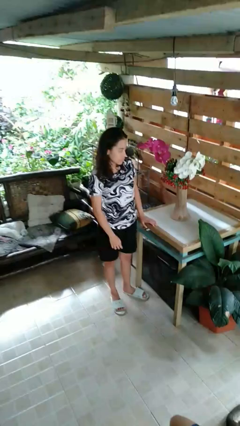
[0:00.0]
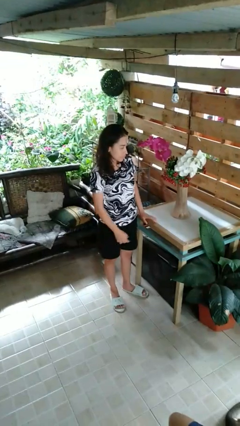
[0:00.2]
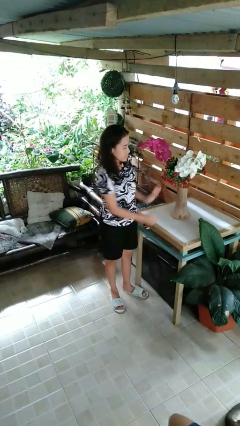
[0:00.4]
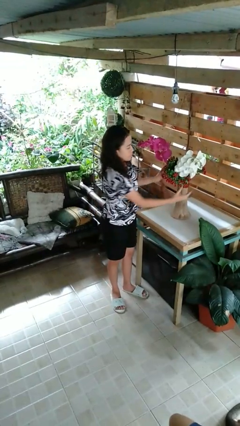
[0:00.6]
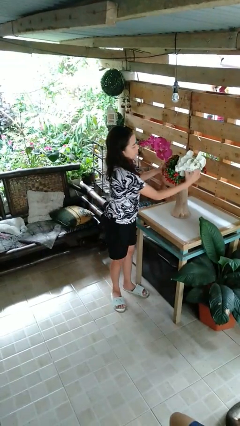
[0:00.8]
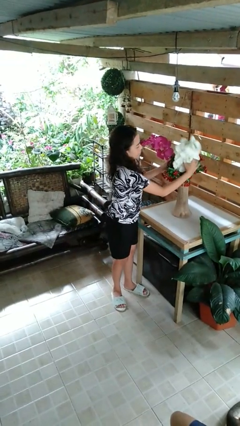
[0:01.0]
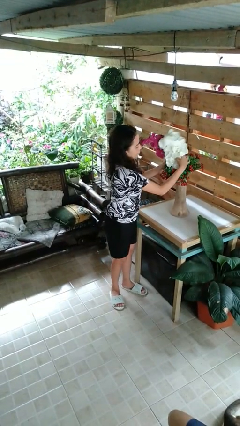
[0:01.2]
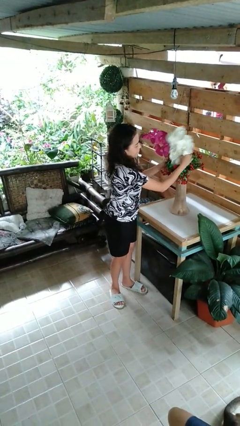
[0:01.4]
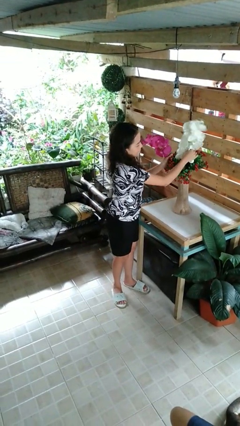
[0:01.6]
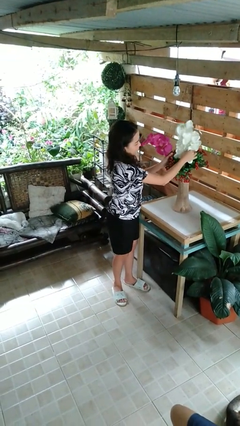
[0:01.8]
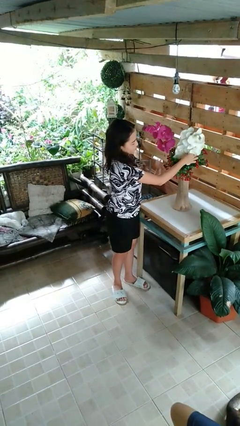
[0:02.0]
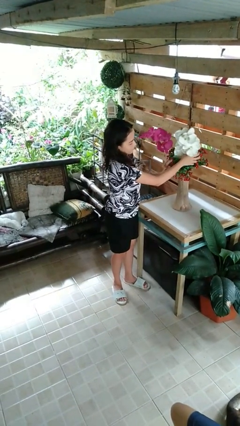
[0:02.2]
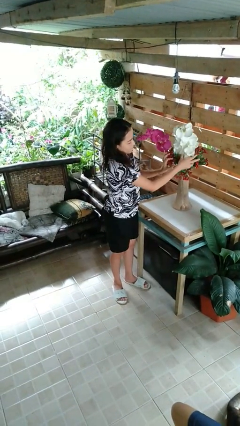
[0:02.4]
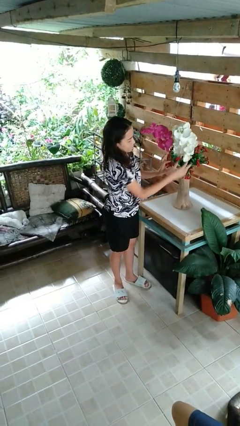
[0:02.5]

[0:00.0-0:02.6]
person arranges flowers in vase

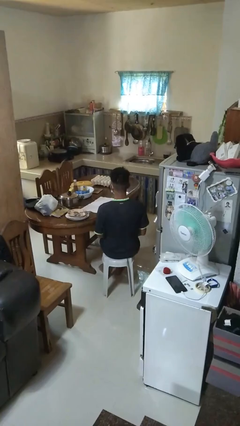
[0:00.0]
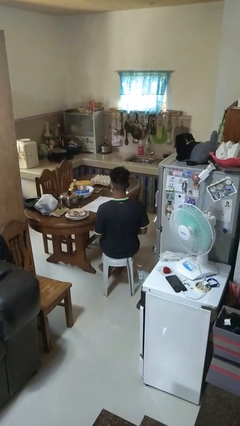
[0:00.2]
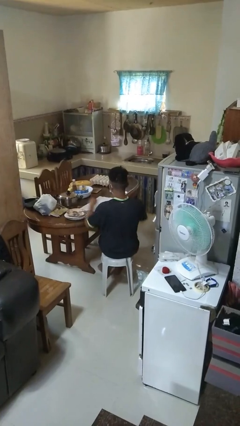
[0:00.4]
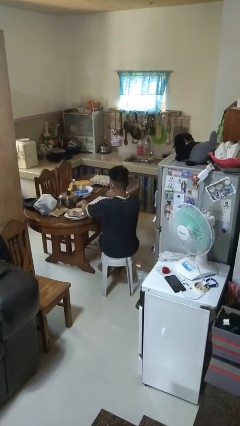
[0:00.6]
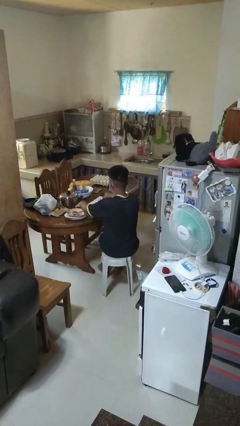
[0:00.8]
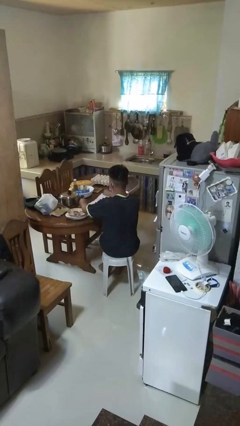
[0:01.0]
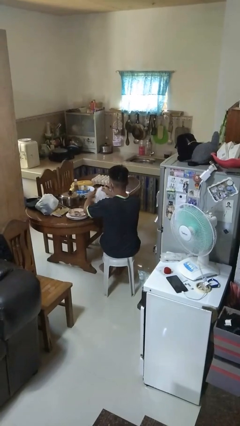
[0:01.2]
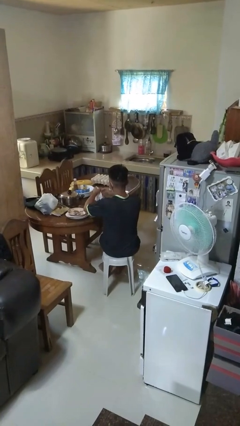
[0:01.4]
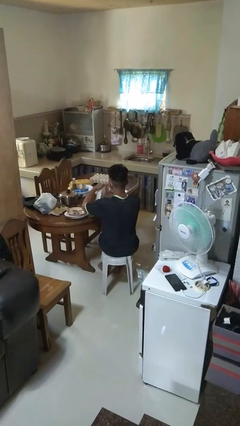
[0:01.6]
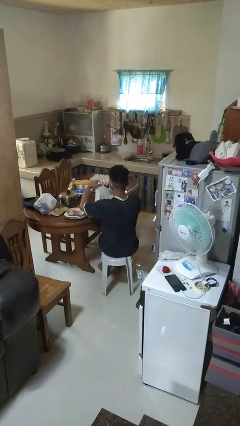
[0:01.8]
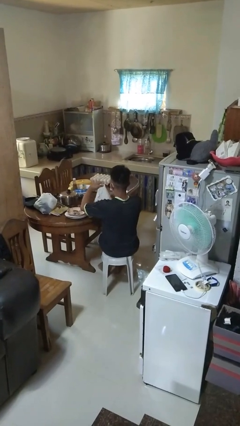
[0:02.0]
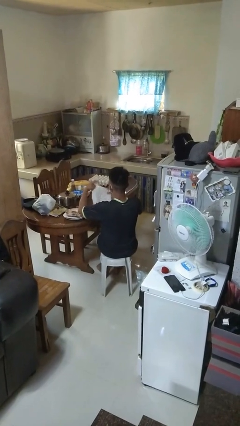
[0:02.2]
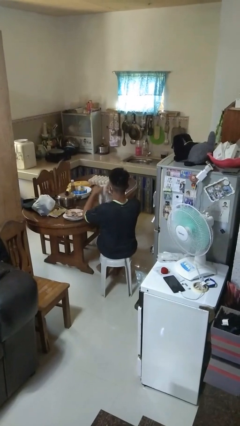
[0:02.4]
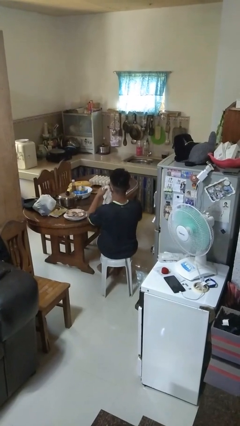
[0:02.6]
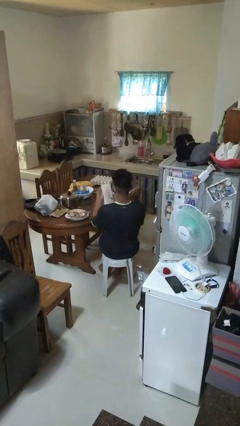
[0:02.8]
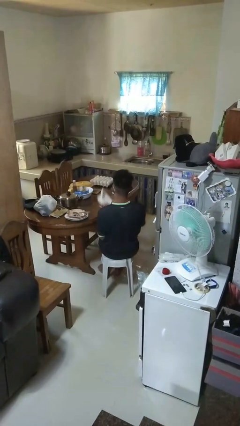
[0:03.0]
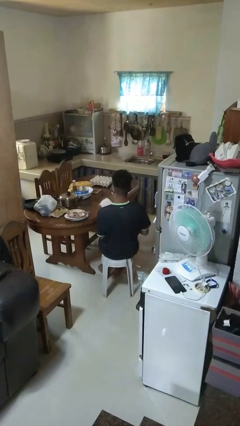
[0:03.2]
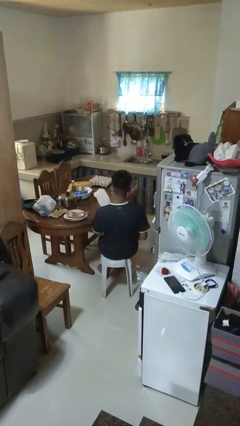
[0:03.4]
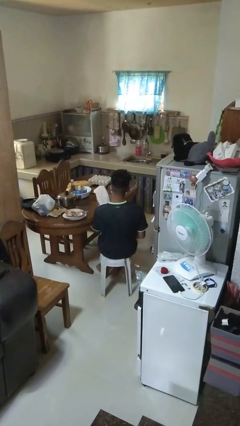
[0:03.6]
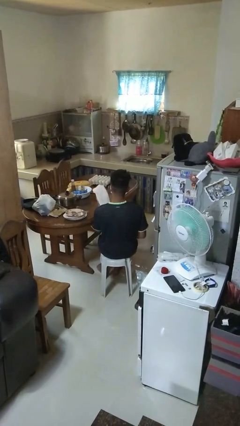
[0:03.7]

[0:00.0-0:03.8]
person folds tablecloth

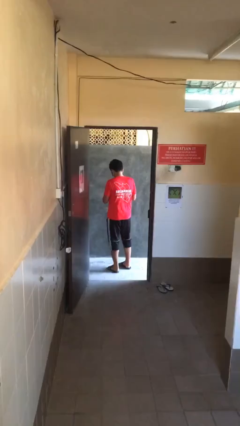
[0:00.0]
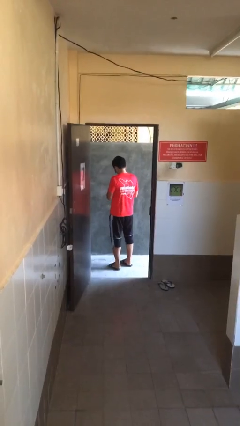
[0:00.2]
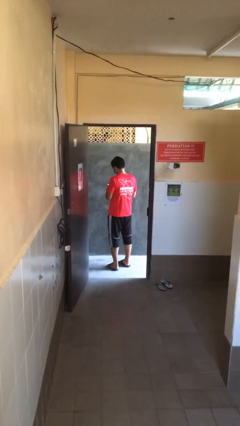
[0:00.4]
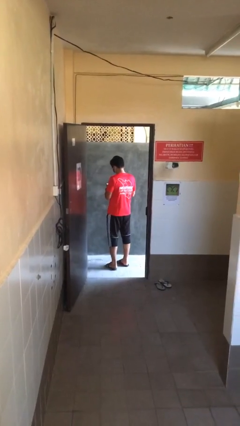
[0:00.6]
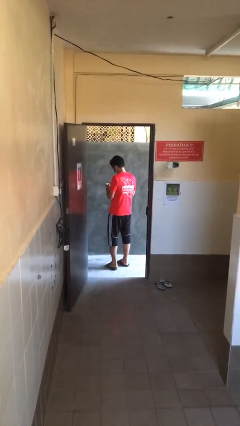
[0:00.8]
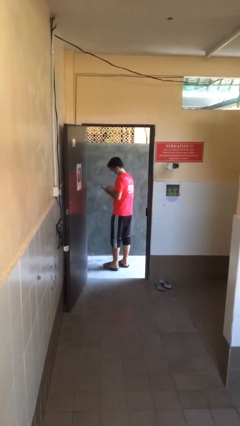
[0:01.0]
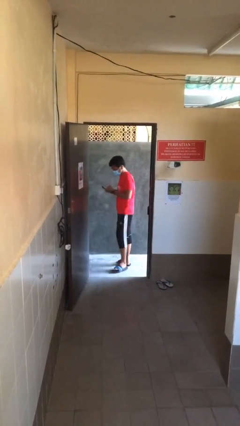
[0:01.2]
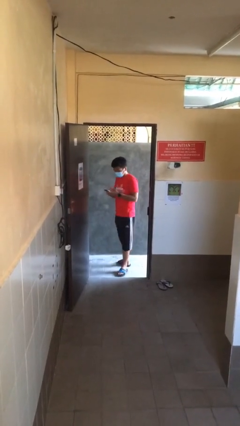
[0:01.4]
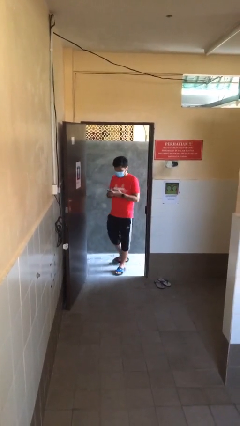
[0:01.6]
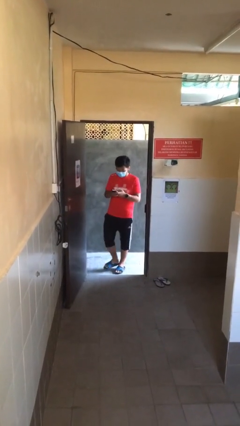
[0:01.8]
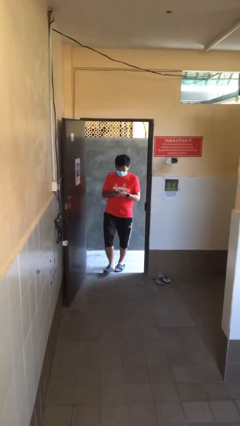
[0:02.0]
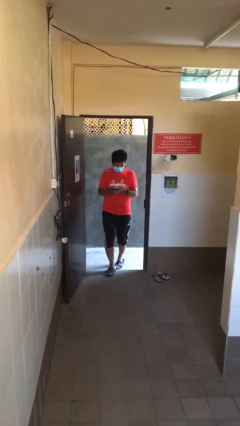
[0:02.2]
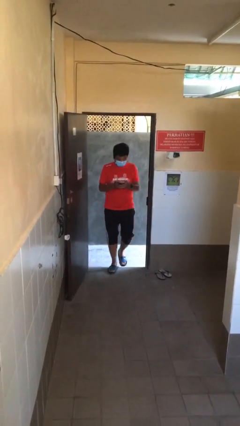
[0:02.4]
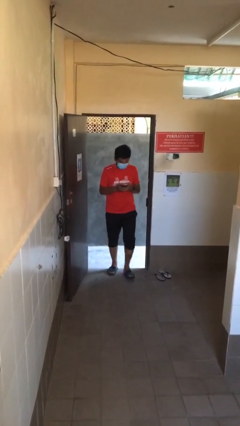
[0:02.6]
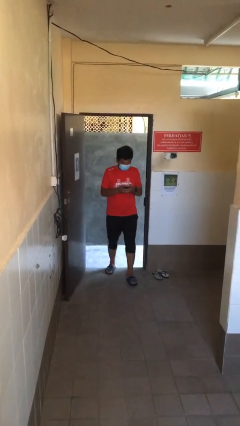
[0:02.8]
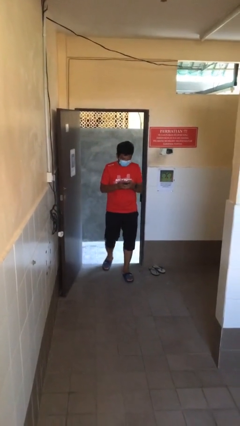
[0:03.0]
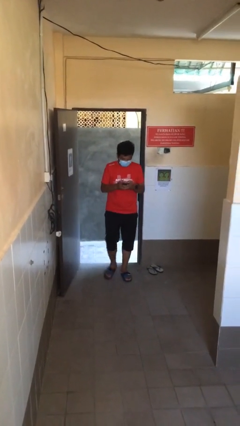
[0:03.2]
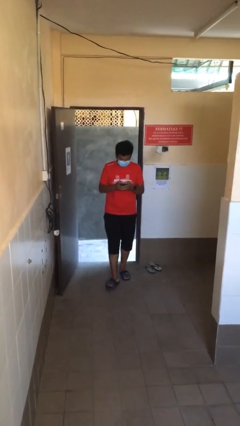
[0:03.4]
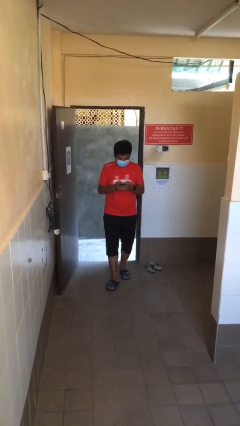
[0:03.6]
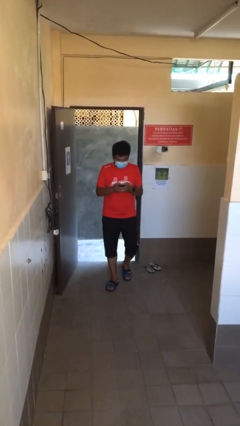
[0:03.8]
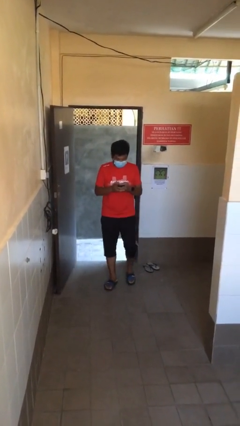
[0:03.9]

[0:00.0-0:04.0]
person enters scene through structure

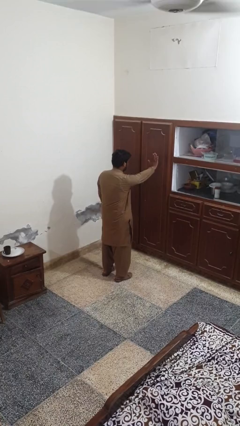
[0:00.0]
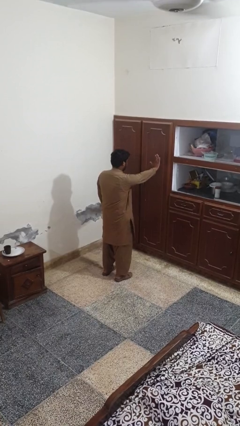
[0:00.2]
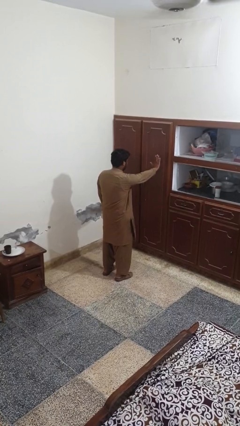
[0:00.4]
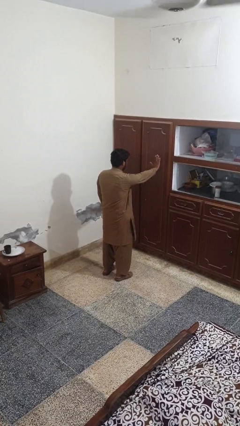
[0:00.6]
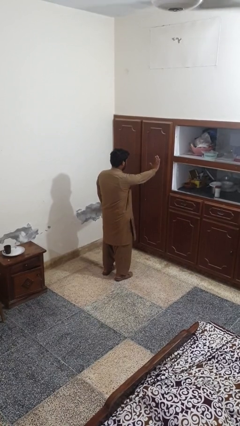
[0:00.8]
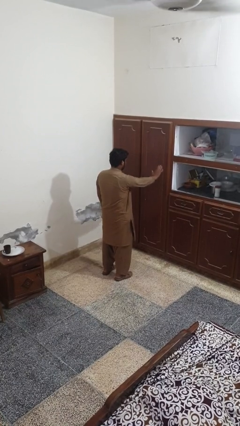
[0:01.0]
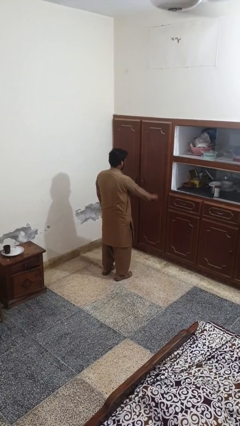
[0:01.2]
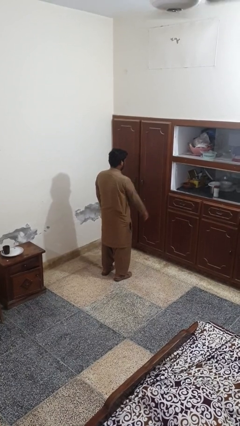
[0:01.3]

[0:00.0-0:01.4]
person gestures stop

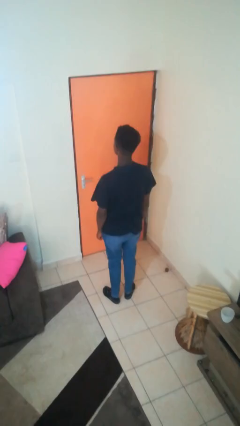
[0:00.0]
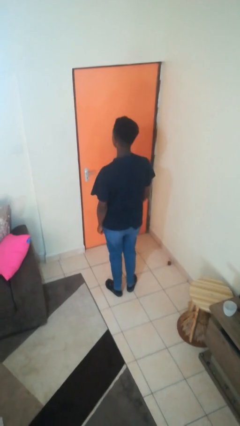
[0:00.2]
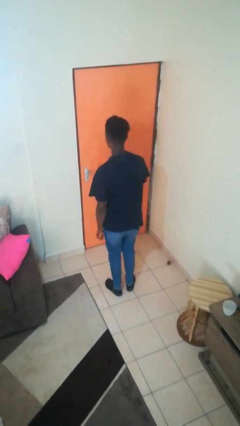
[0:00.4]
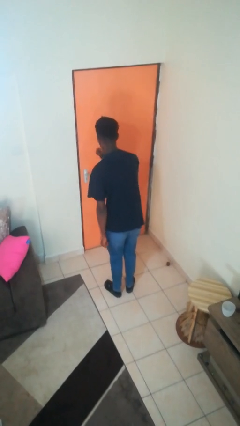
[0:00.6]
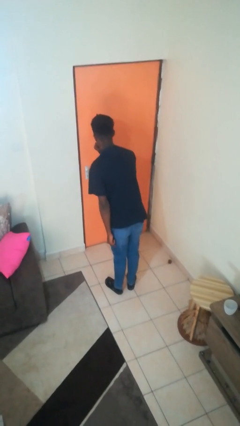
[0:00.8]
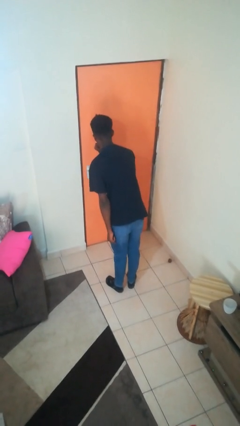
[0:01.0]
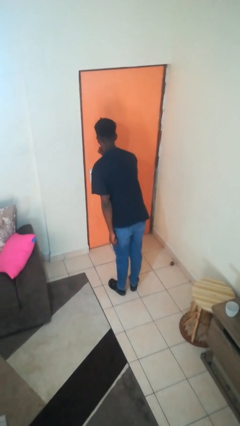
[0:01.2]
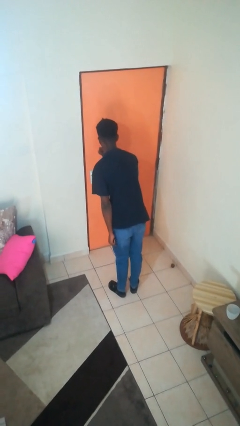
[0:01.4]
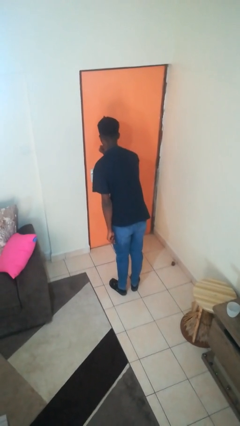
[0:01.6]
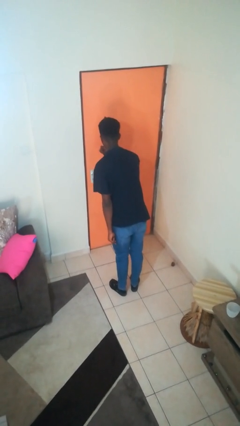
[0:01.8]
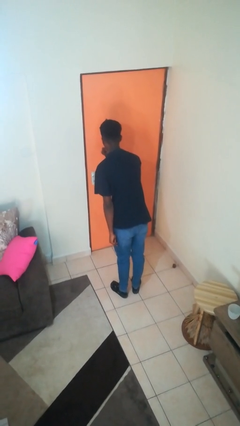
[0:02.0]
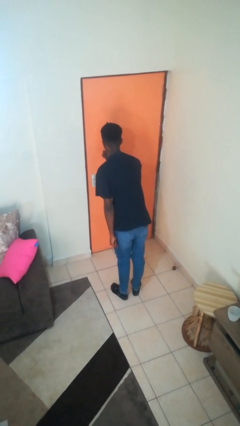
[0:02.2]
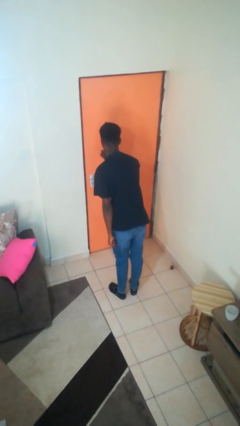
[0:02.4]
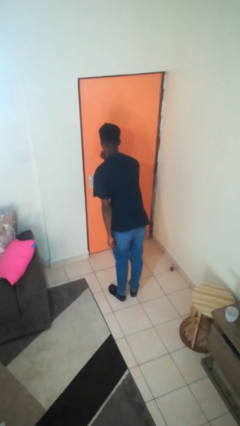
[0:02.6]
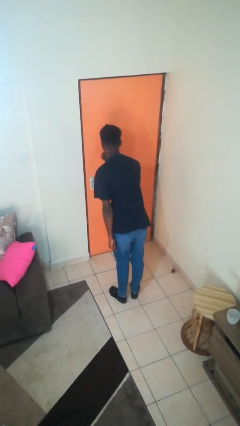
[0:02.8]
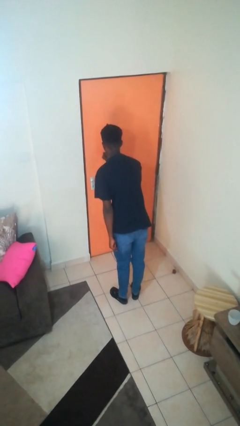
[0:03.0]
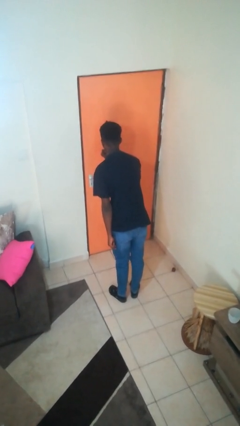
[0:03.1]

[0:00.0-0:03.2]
person gestures be quiet

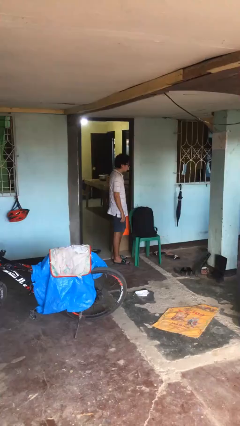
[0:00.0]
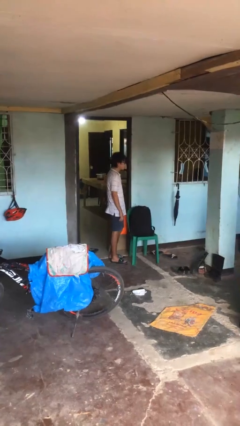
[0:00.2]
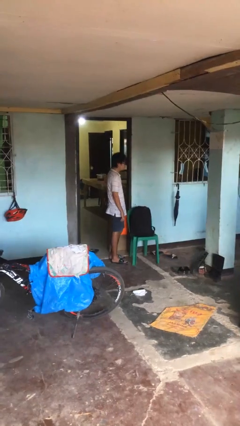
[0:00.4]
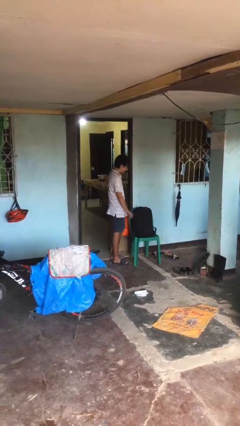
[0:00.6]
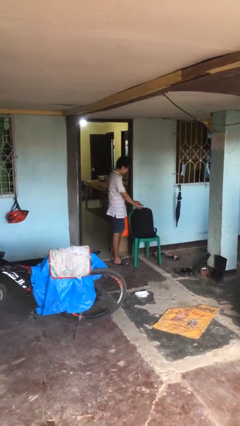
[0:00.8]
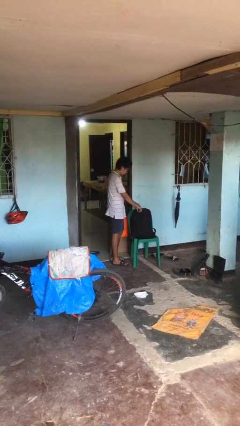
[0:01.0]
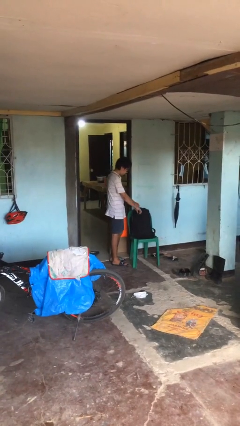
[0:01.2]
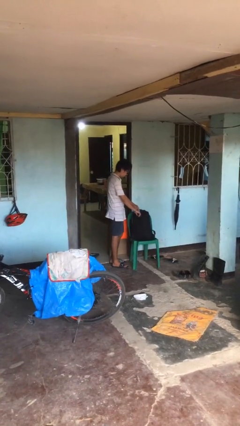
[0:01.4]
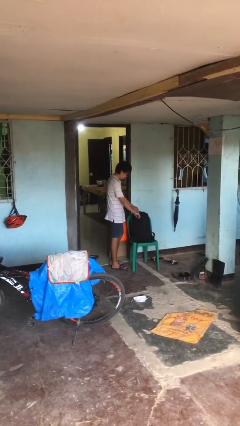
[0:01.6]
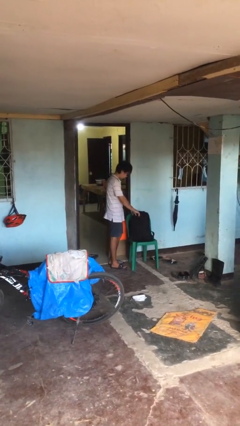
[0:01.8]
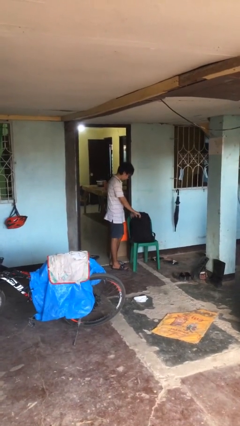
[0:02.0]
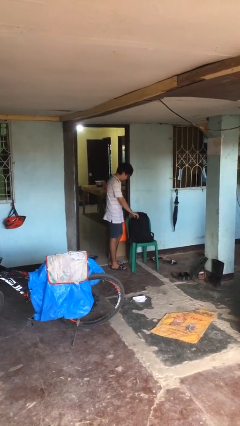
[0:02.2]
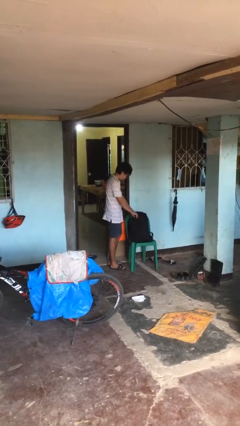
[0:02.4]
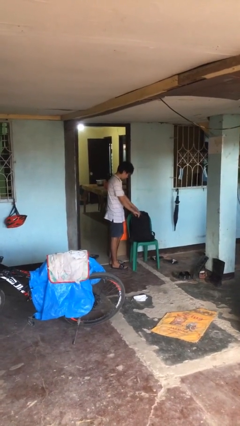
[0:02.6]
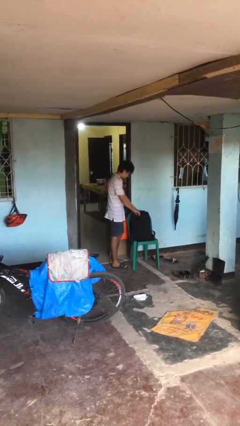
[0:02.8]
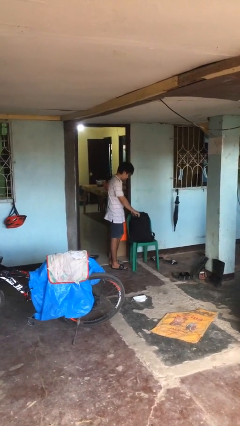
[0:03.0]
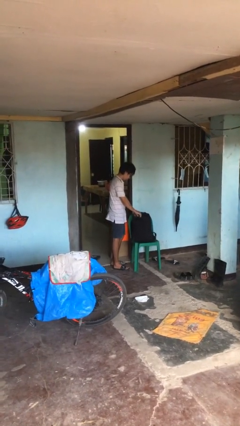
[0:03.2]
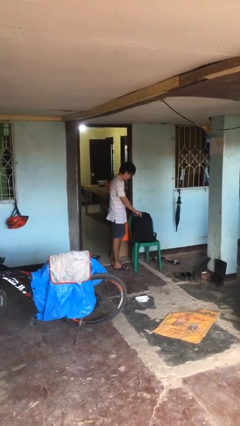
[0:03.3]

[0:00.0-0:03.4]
person searches in backpack
